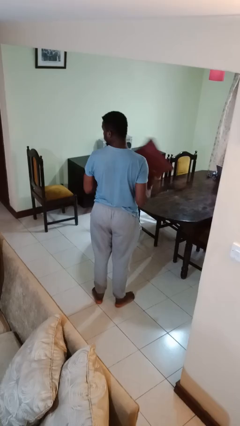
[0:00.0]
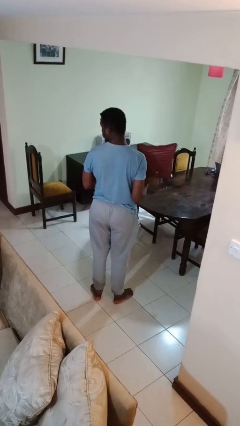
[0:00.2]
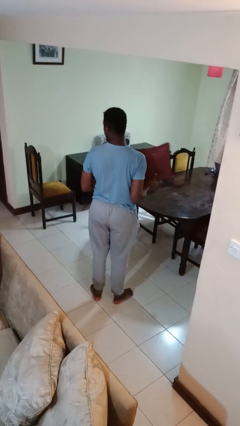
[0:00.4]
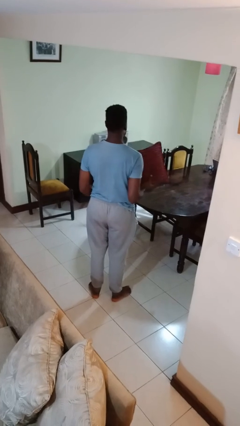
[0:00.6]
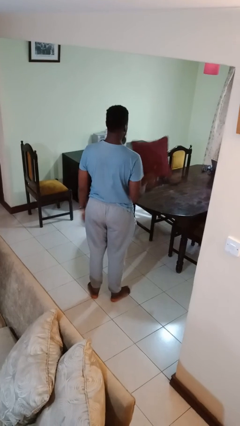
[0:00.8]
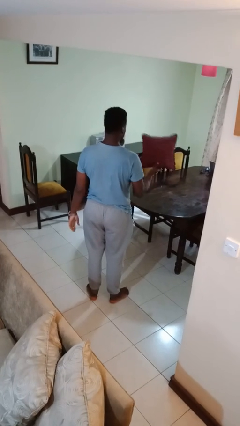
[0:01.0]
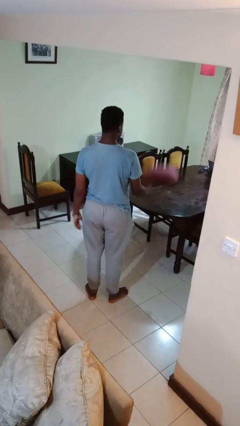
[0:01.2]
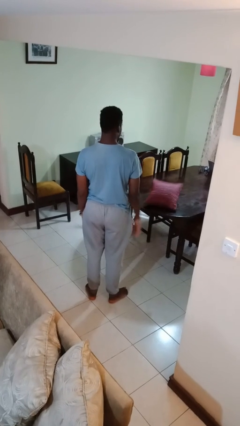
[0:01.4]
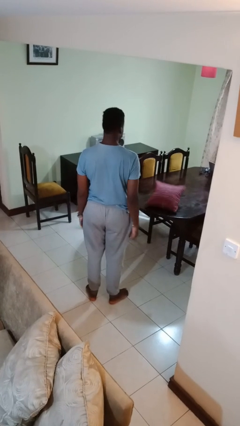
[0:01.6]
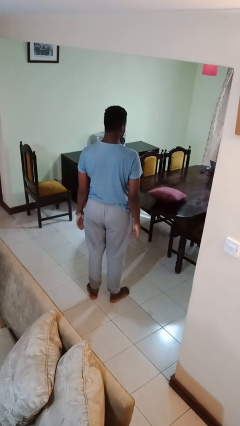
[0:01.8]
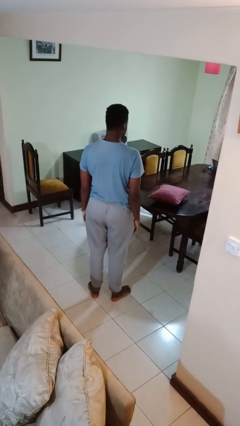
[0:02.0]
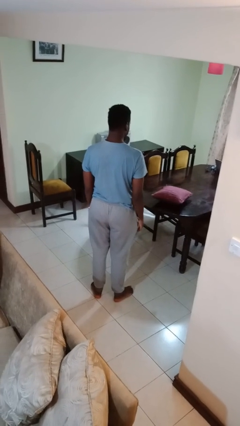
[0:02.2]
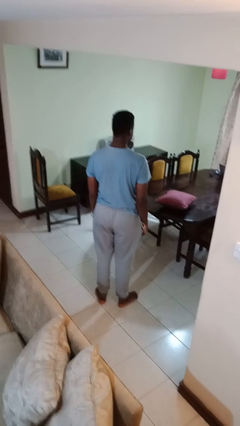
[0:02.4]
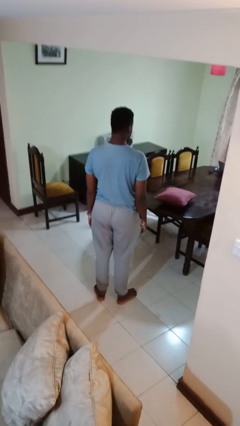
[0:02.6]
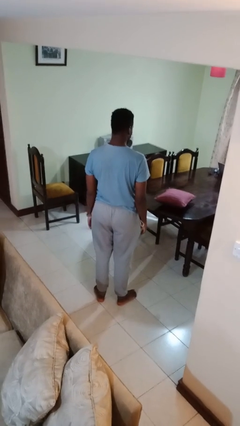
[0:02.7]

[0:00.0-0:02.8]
person throws object on table

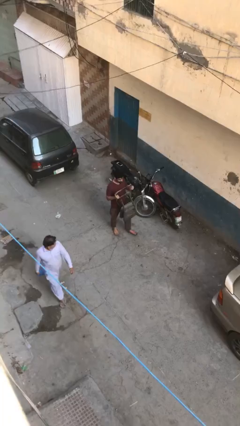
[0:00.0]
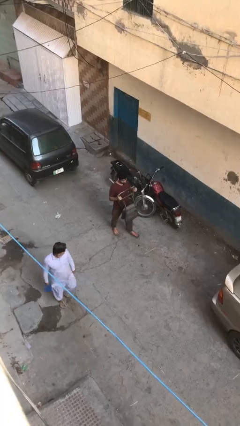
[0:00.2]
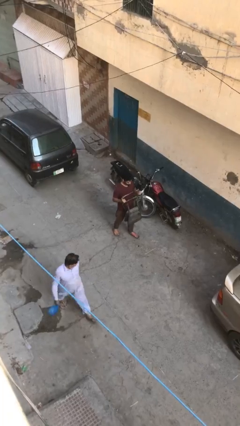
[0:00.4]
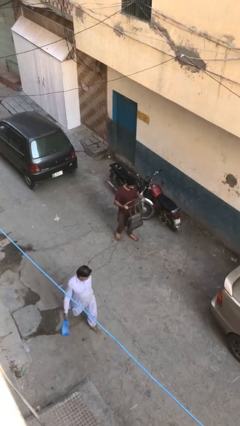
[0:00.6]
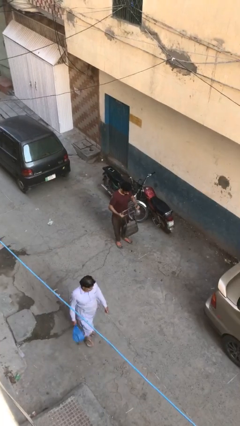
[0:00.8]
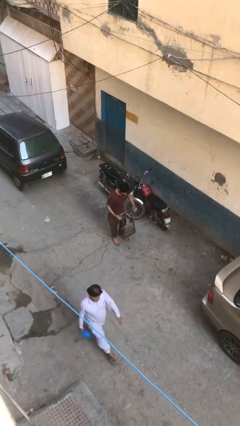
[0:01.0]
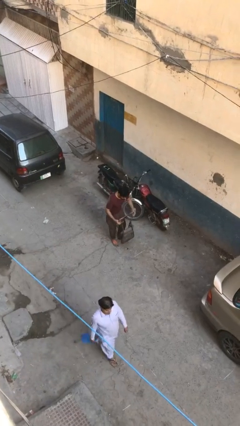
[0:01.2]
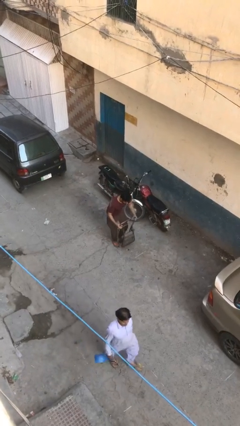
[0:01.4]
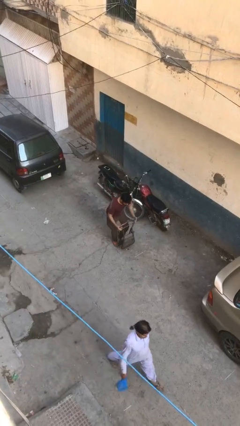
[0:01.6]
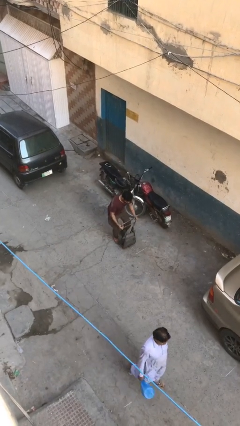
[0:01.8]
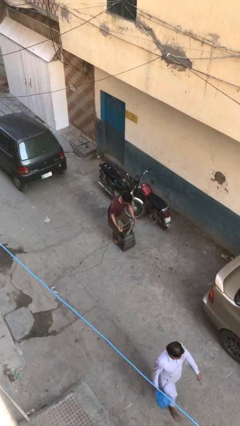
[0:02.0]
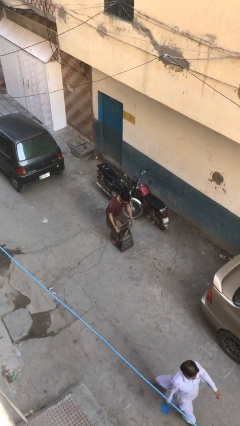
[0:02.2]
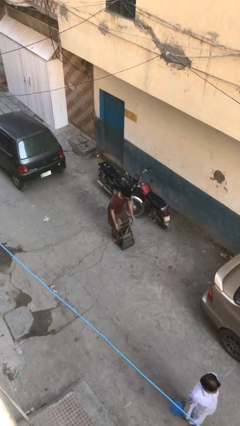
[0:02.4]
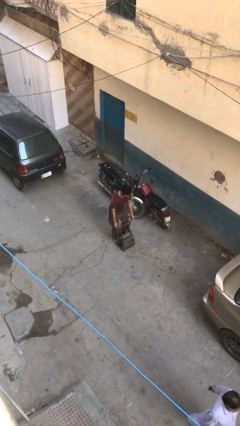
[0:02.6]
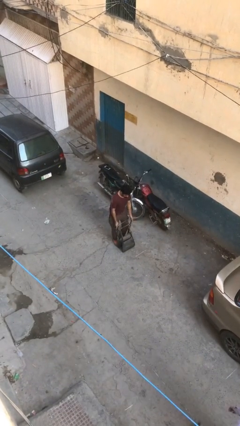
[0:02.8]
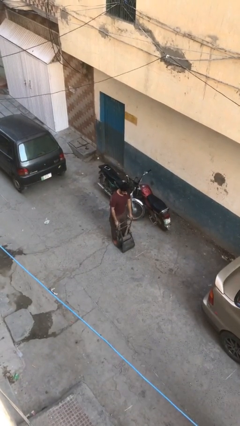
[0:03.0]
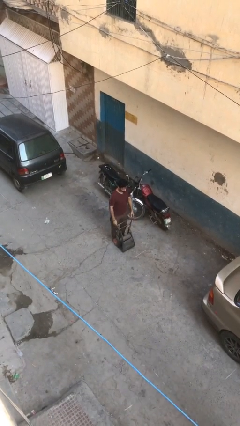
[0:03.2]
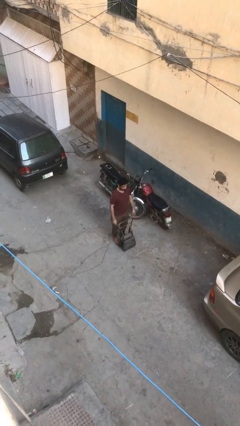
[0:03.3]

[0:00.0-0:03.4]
person puts down object on floor

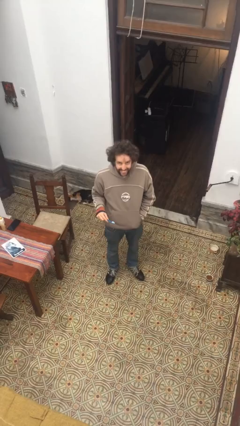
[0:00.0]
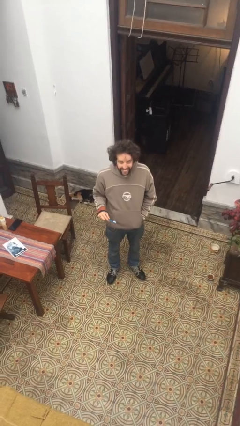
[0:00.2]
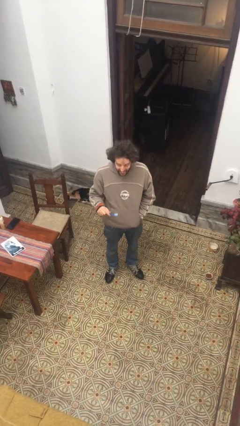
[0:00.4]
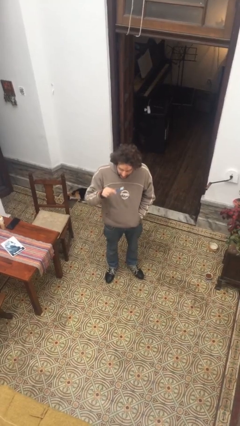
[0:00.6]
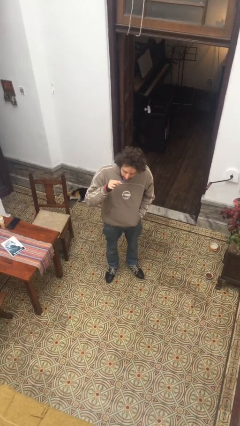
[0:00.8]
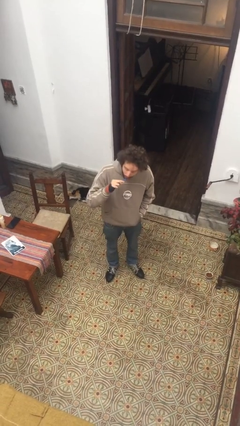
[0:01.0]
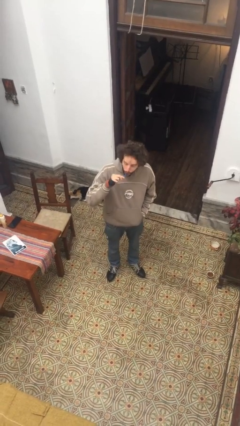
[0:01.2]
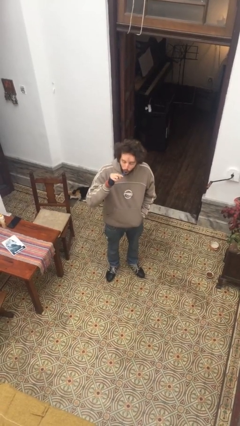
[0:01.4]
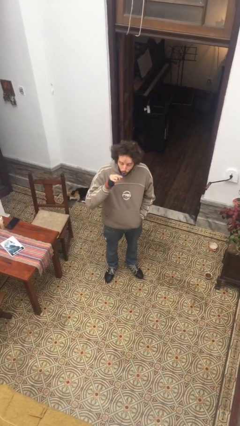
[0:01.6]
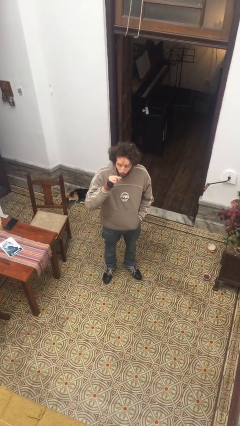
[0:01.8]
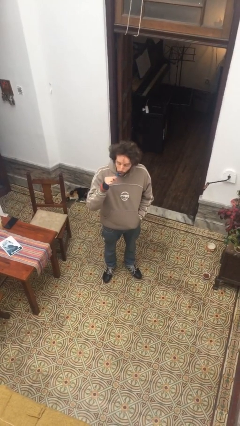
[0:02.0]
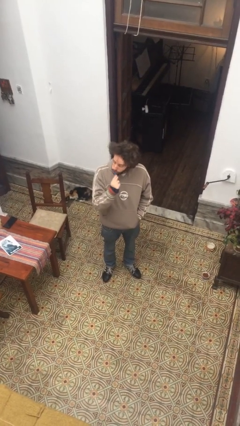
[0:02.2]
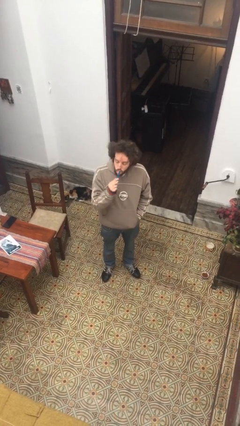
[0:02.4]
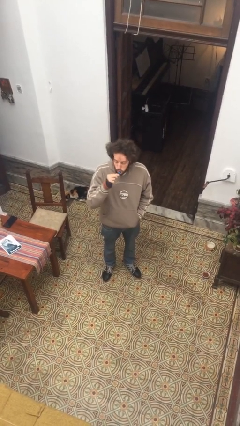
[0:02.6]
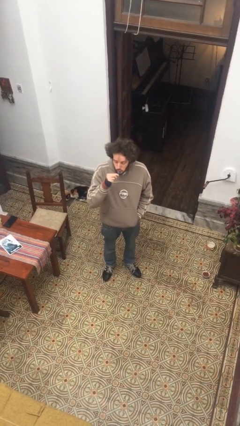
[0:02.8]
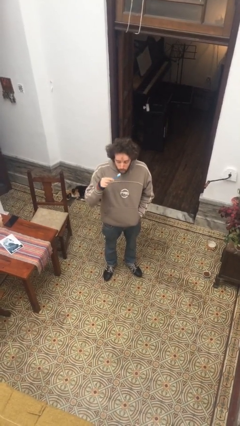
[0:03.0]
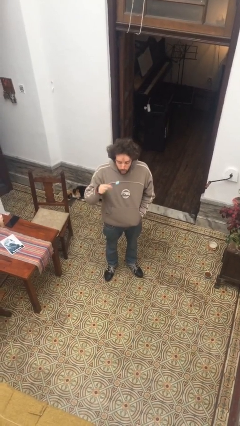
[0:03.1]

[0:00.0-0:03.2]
person brushes teeth

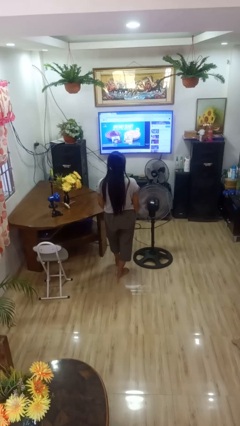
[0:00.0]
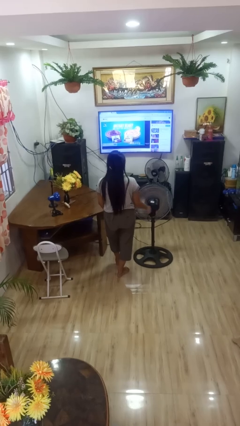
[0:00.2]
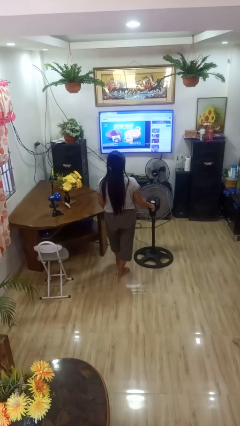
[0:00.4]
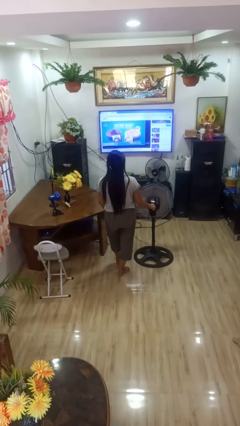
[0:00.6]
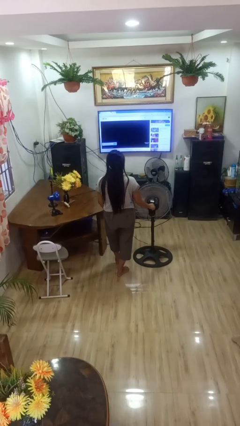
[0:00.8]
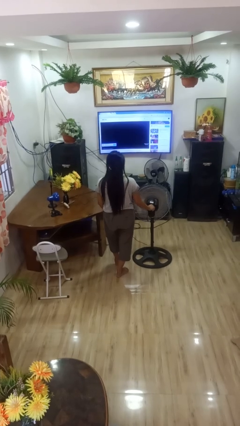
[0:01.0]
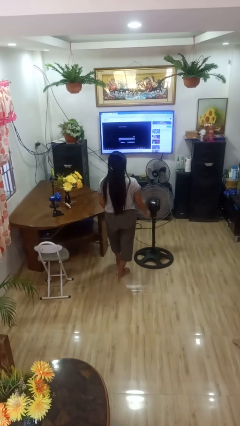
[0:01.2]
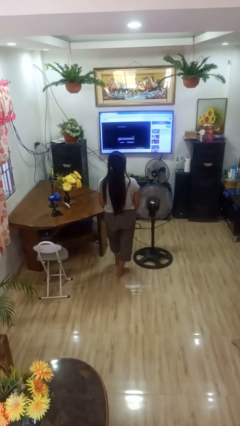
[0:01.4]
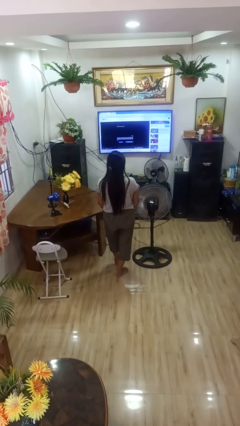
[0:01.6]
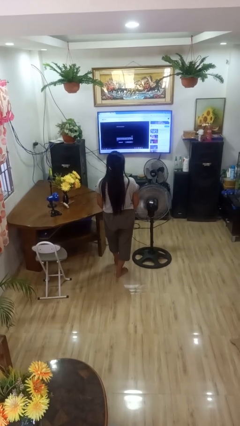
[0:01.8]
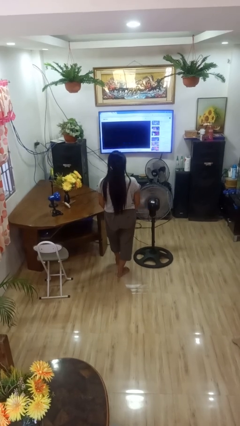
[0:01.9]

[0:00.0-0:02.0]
person turns off fan

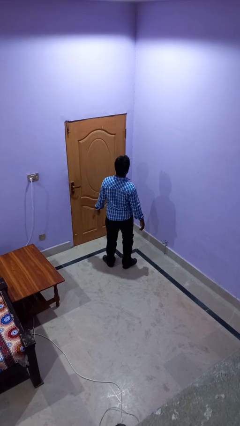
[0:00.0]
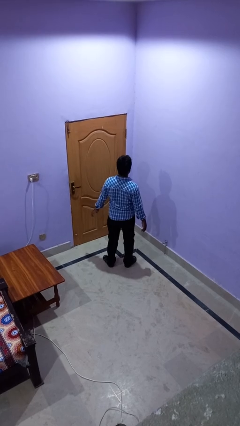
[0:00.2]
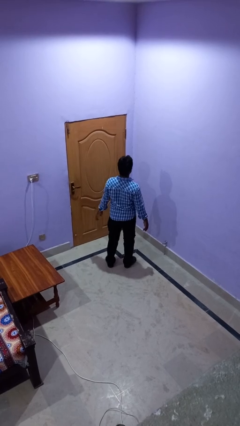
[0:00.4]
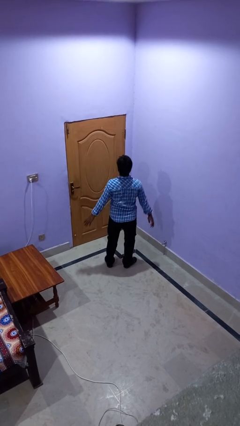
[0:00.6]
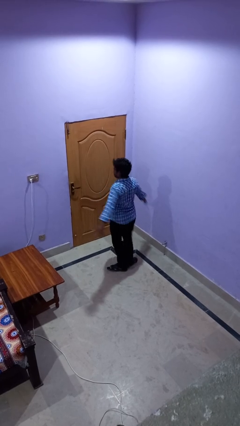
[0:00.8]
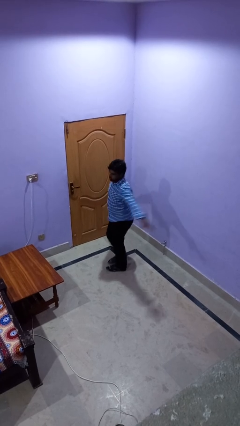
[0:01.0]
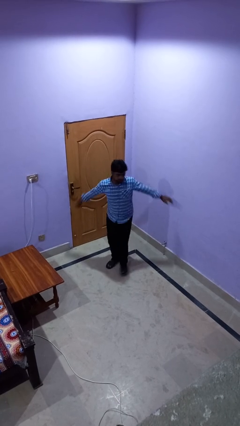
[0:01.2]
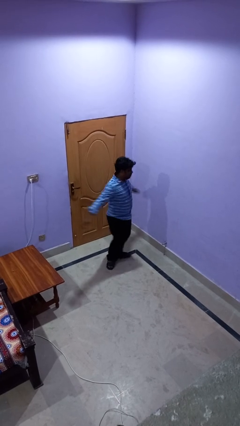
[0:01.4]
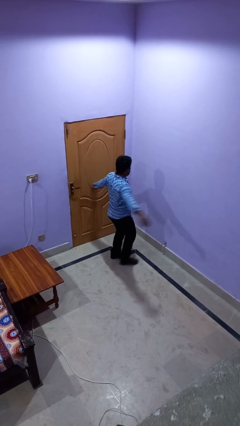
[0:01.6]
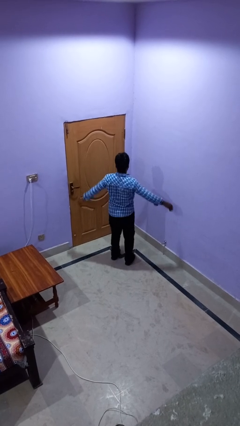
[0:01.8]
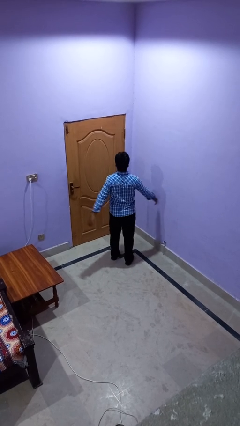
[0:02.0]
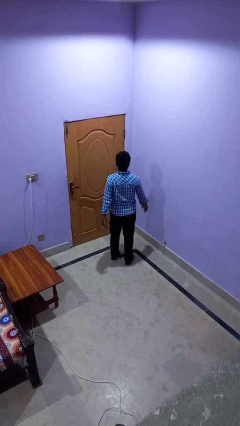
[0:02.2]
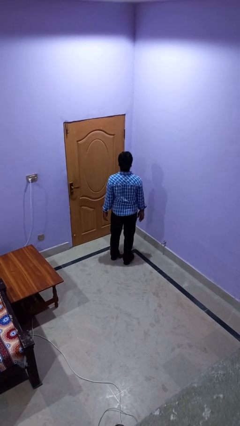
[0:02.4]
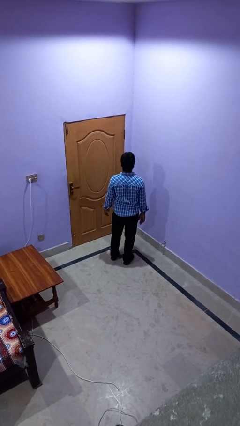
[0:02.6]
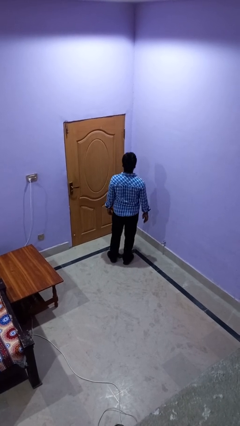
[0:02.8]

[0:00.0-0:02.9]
person twirls

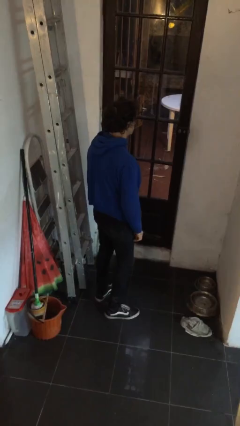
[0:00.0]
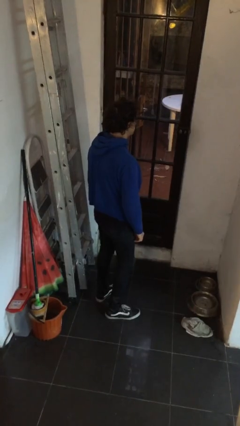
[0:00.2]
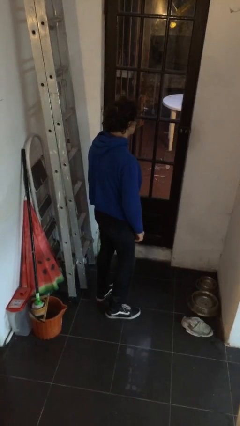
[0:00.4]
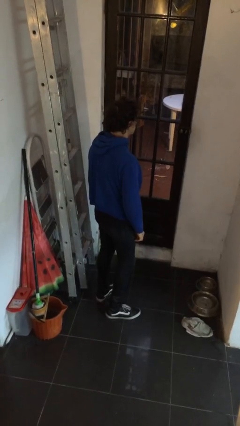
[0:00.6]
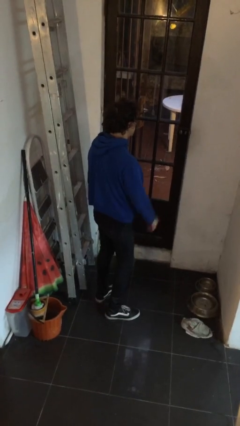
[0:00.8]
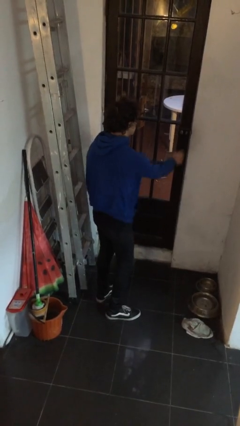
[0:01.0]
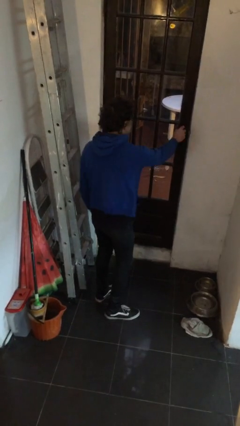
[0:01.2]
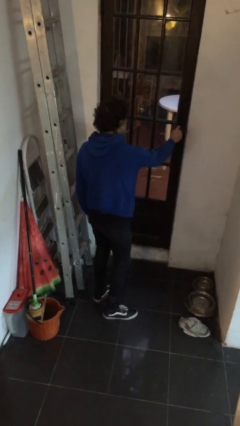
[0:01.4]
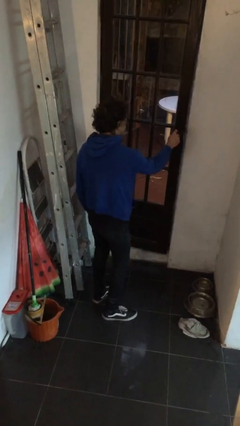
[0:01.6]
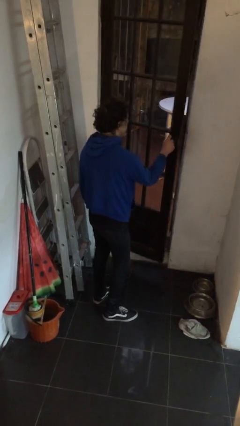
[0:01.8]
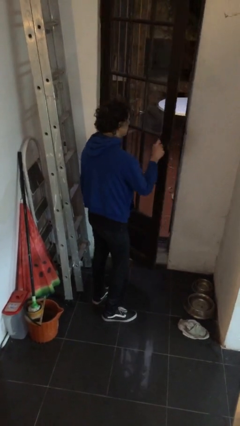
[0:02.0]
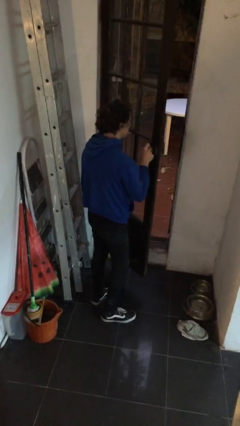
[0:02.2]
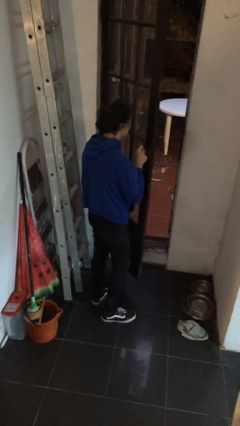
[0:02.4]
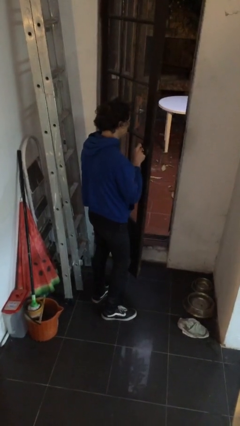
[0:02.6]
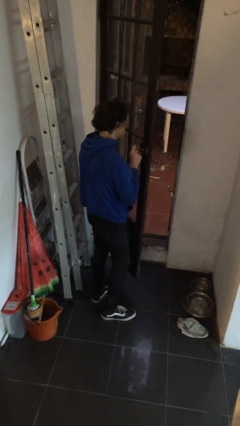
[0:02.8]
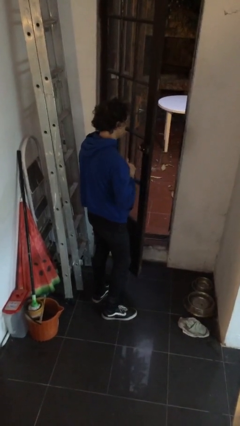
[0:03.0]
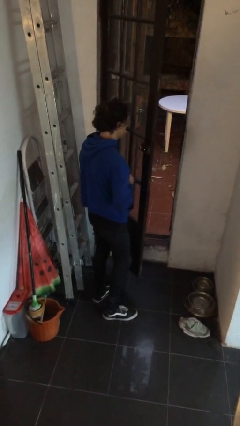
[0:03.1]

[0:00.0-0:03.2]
person opens facility door
